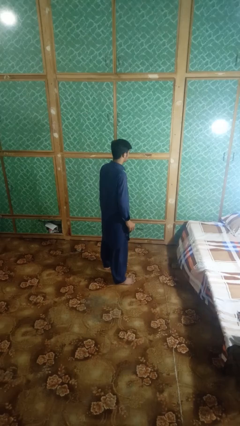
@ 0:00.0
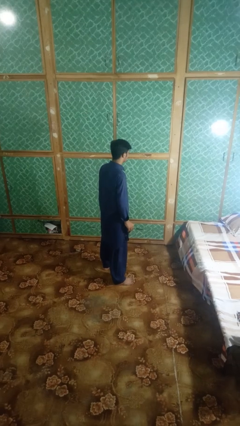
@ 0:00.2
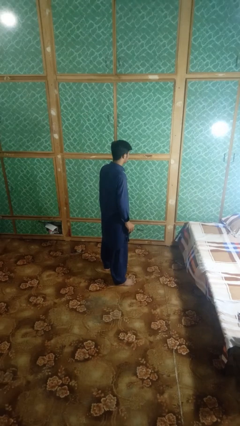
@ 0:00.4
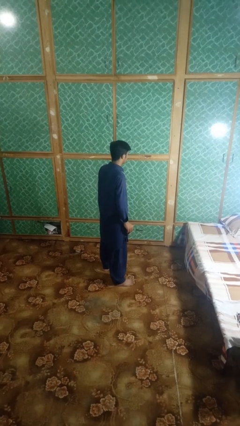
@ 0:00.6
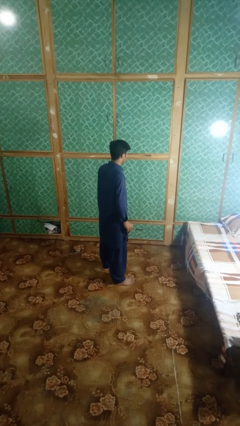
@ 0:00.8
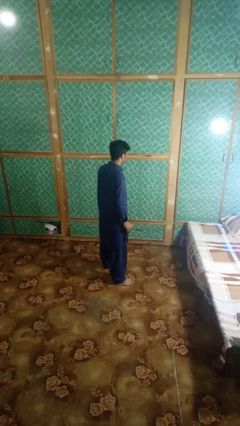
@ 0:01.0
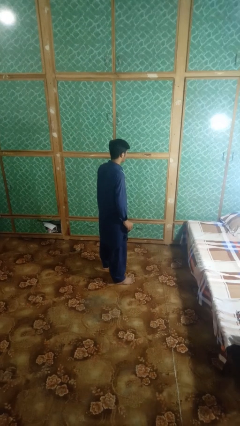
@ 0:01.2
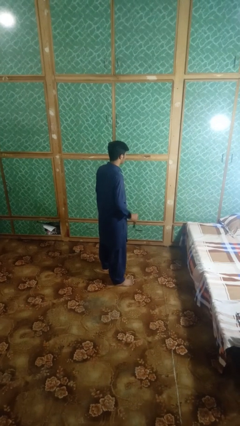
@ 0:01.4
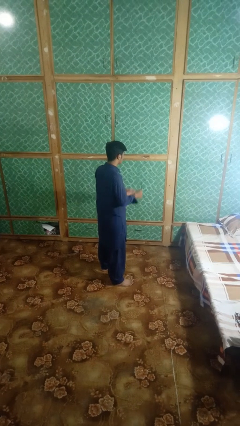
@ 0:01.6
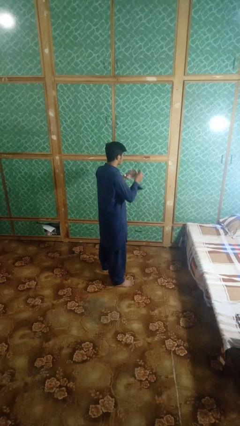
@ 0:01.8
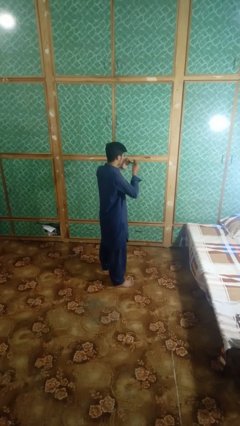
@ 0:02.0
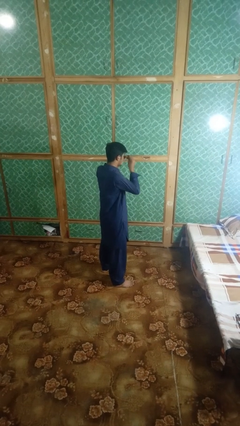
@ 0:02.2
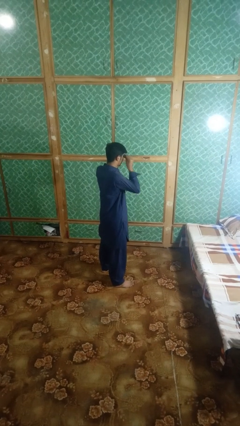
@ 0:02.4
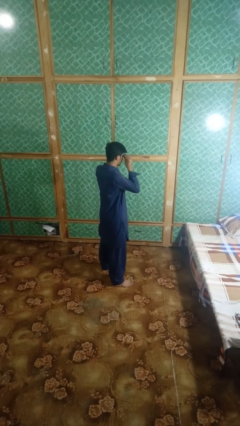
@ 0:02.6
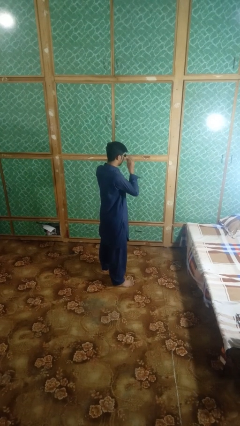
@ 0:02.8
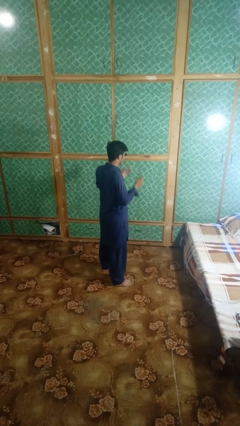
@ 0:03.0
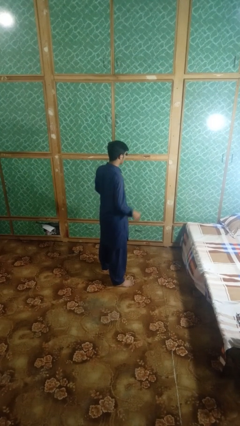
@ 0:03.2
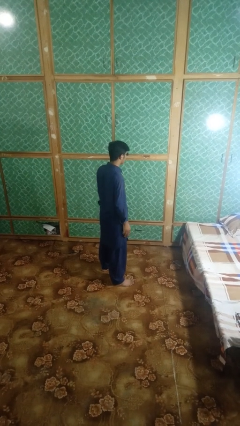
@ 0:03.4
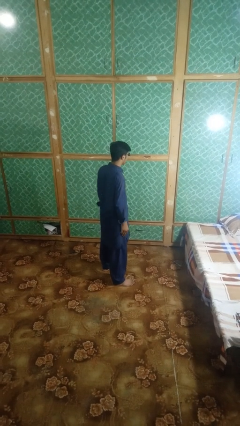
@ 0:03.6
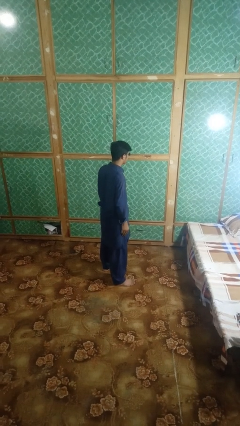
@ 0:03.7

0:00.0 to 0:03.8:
person puts on sunglasses

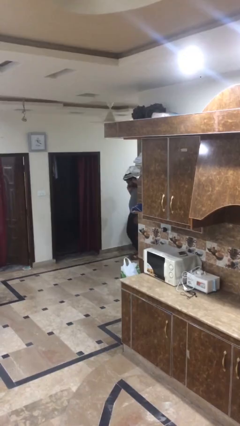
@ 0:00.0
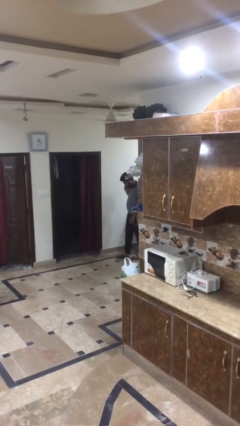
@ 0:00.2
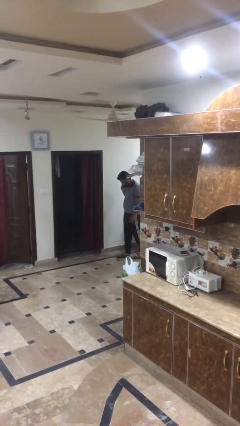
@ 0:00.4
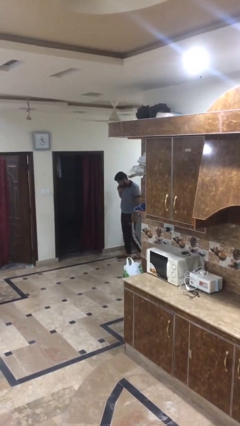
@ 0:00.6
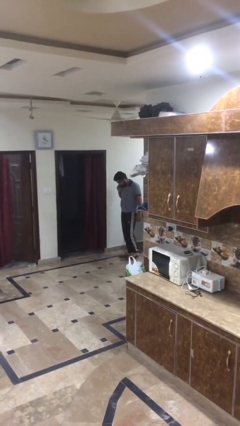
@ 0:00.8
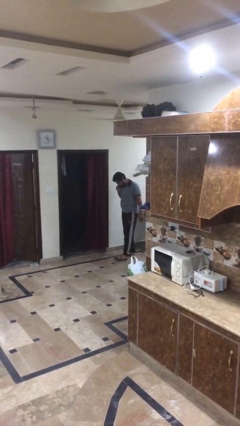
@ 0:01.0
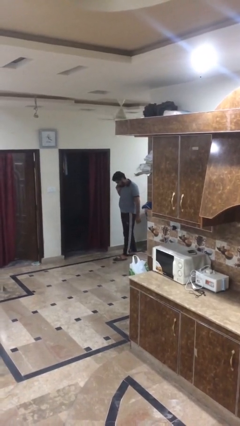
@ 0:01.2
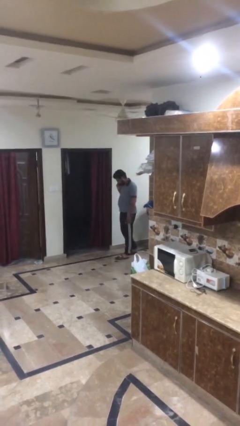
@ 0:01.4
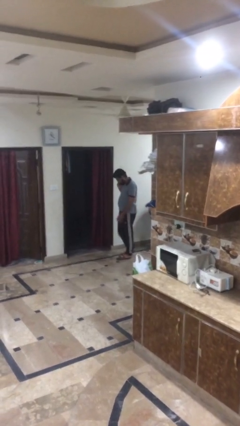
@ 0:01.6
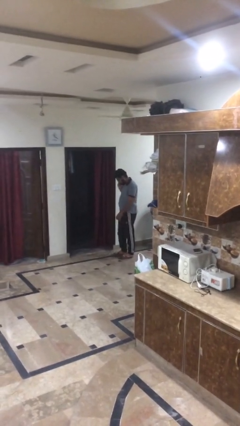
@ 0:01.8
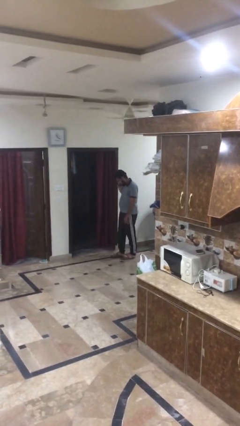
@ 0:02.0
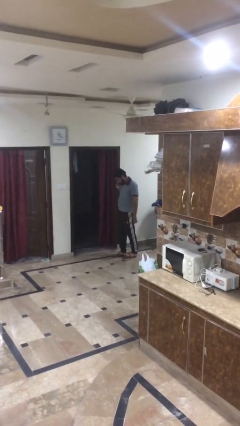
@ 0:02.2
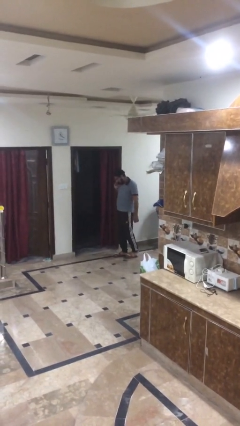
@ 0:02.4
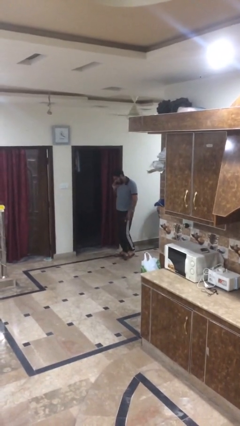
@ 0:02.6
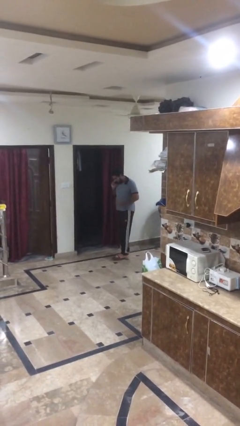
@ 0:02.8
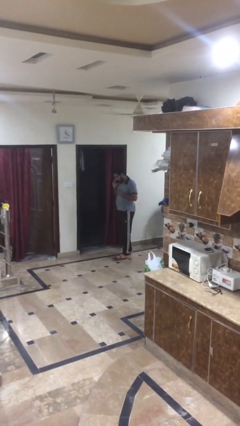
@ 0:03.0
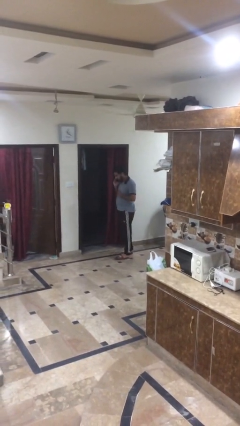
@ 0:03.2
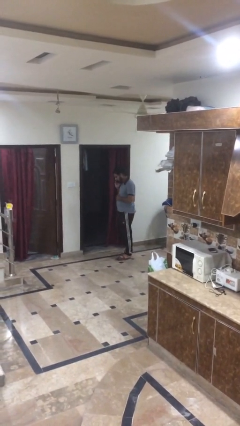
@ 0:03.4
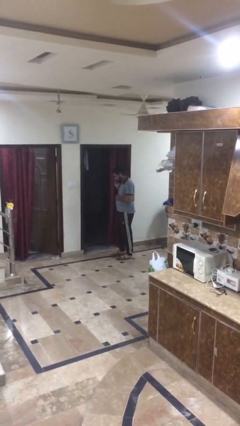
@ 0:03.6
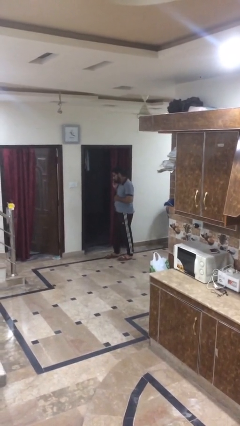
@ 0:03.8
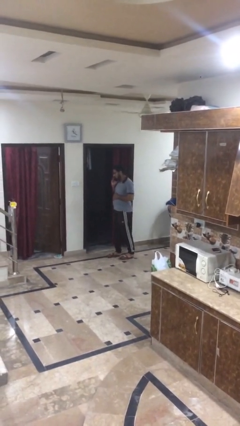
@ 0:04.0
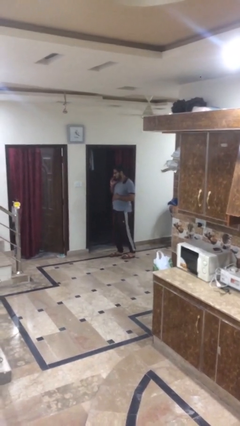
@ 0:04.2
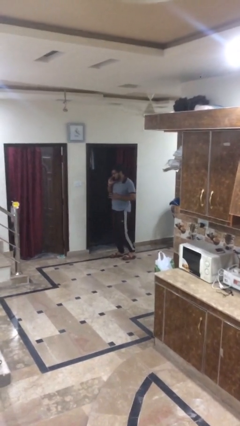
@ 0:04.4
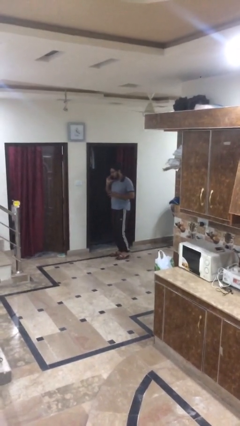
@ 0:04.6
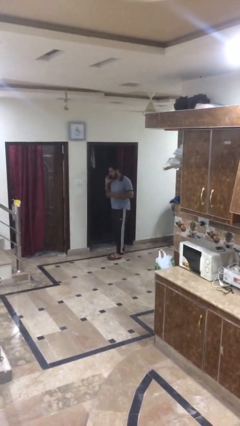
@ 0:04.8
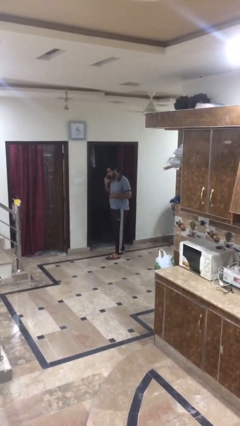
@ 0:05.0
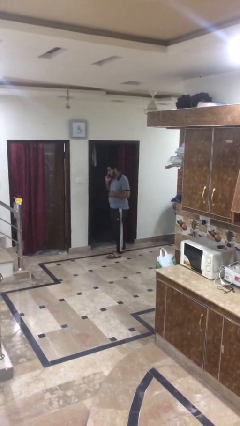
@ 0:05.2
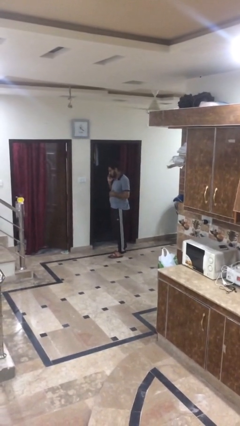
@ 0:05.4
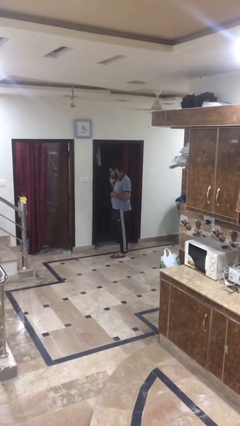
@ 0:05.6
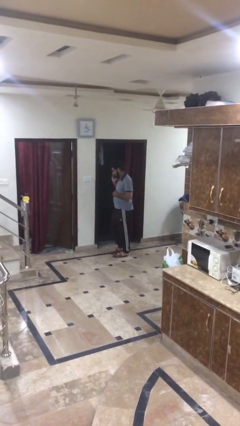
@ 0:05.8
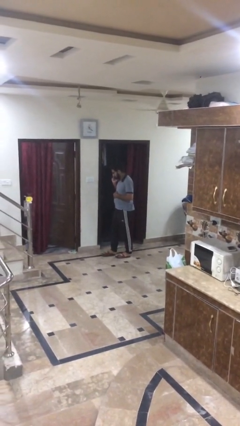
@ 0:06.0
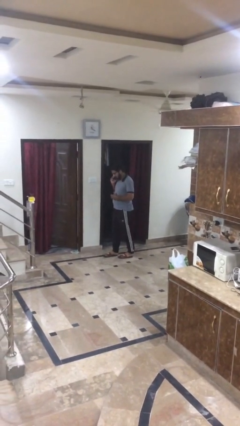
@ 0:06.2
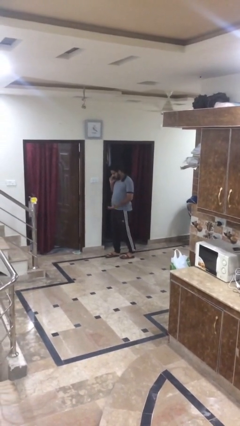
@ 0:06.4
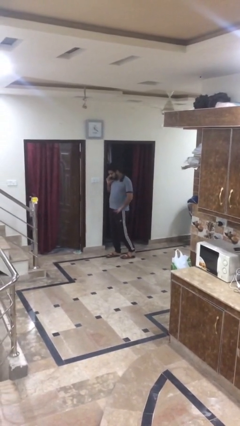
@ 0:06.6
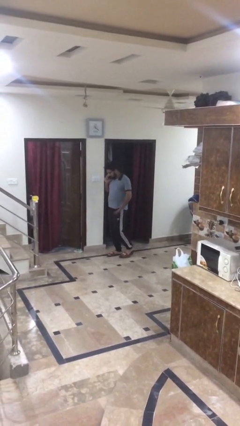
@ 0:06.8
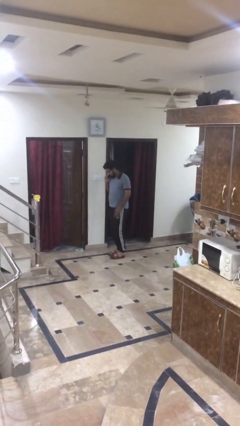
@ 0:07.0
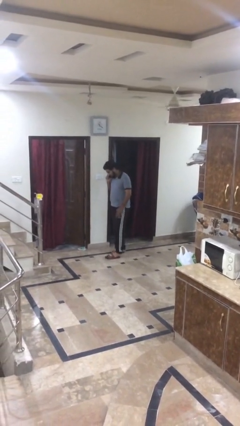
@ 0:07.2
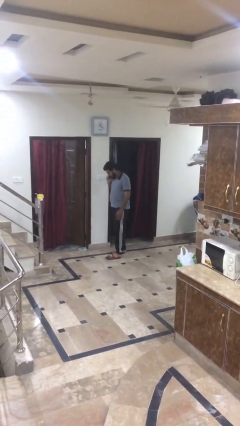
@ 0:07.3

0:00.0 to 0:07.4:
person enters scene through structure

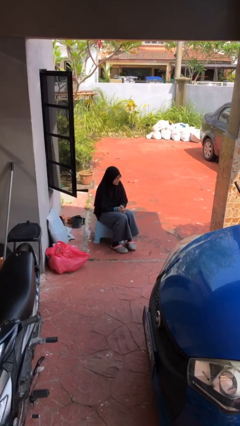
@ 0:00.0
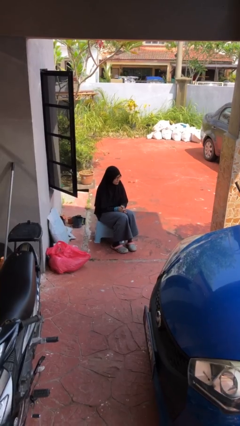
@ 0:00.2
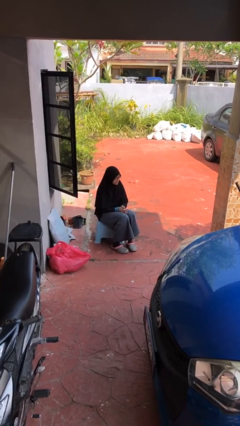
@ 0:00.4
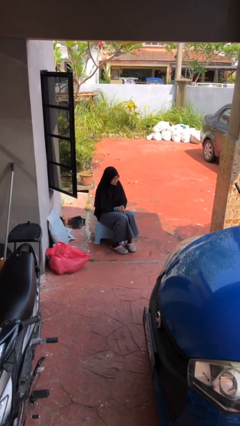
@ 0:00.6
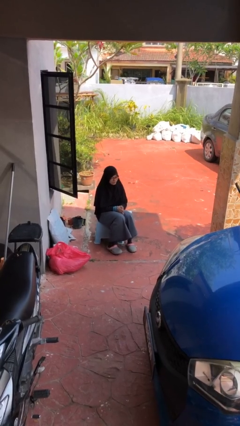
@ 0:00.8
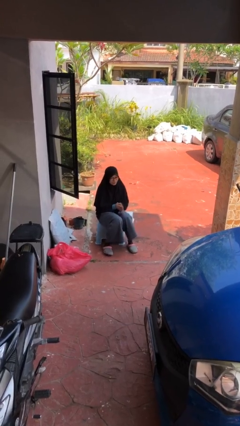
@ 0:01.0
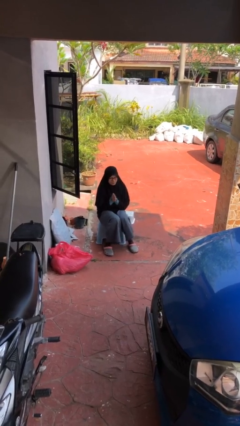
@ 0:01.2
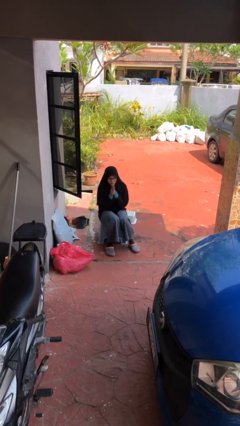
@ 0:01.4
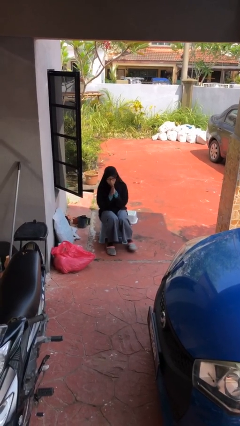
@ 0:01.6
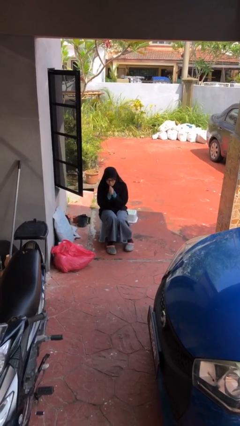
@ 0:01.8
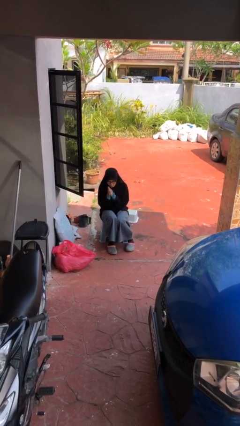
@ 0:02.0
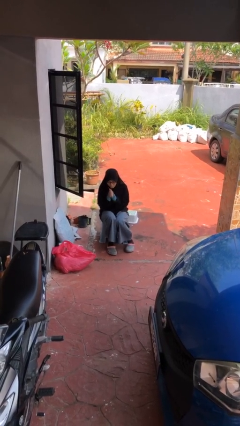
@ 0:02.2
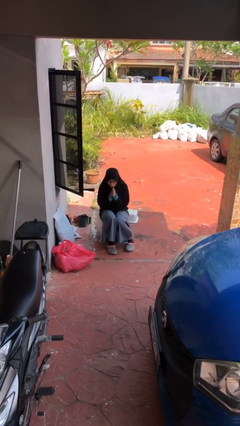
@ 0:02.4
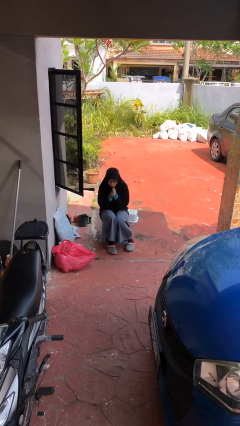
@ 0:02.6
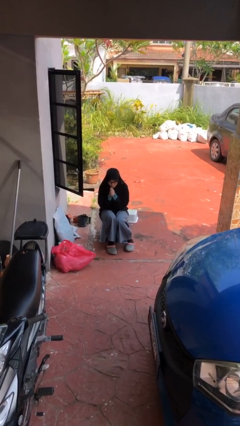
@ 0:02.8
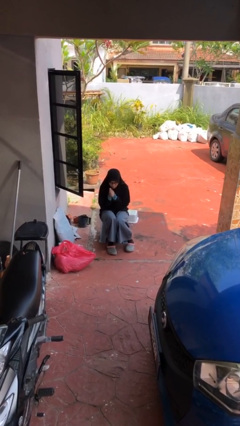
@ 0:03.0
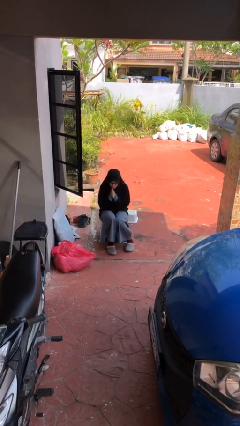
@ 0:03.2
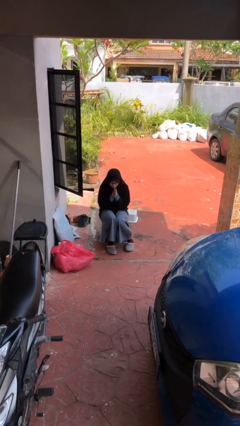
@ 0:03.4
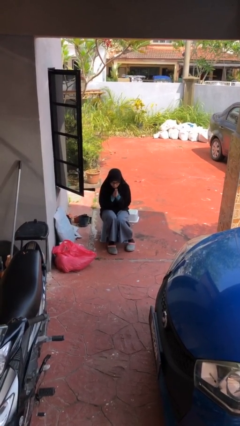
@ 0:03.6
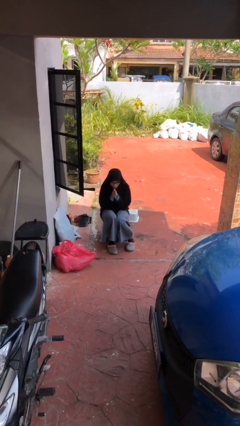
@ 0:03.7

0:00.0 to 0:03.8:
person blows into hands

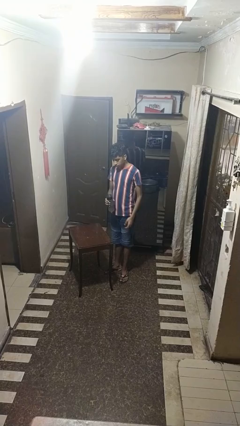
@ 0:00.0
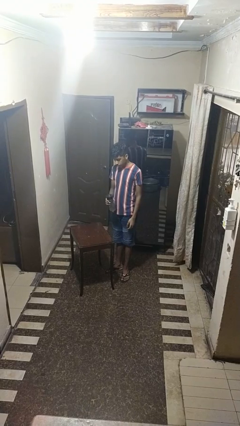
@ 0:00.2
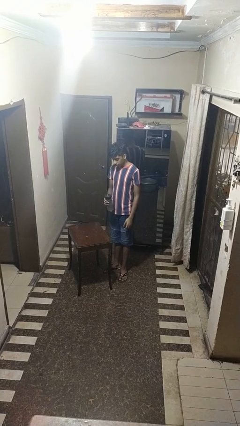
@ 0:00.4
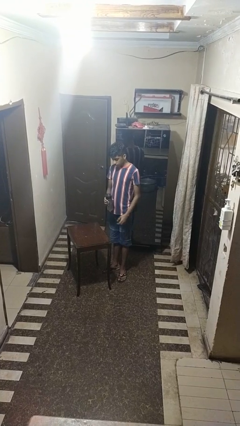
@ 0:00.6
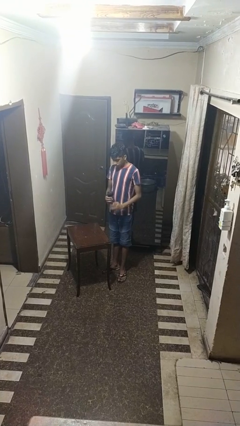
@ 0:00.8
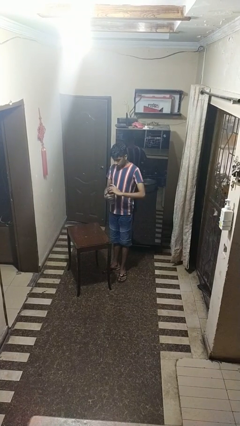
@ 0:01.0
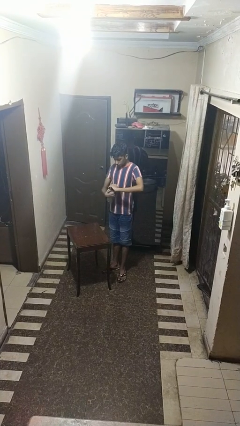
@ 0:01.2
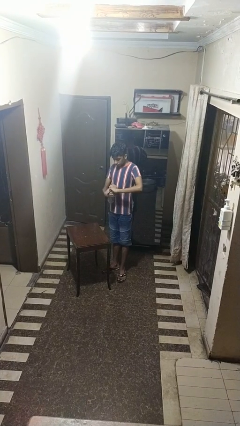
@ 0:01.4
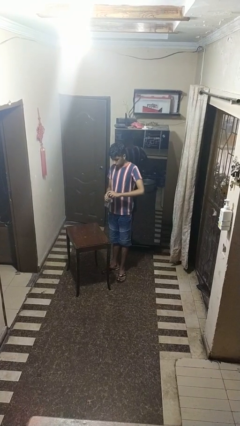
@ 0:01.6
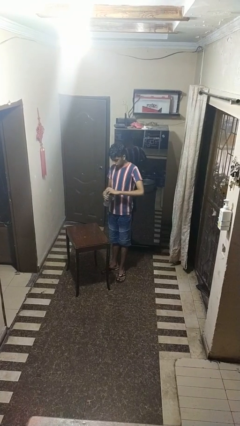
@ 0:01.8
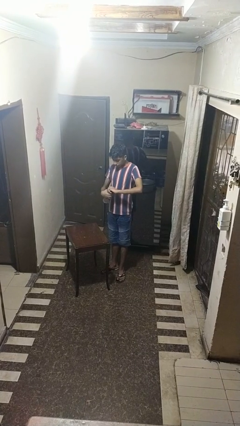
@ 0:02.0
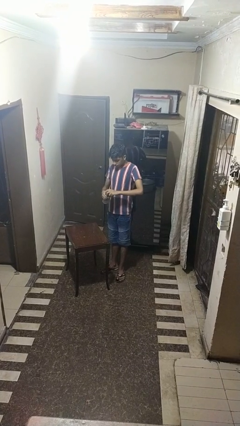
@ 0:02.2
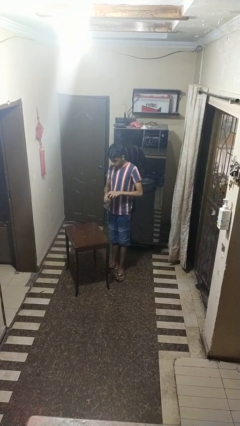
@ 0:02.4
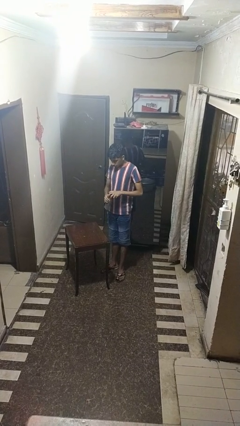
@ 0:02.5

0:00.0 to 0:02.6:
person unscrews lid from bottle

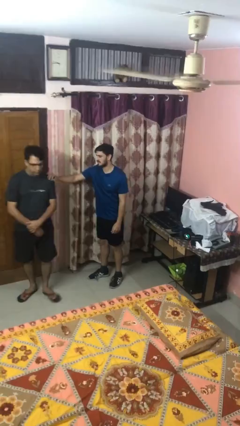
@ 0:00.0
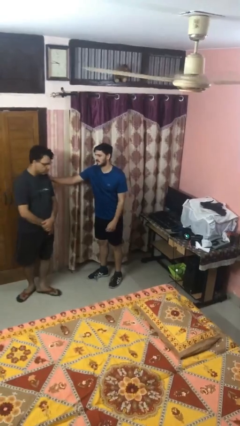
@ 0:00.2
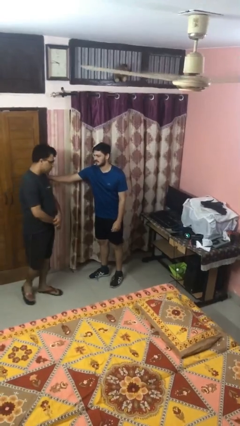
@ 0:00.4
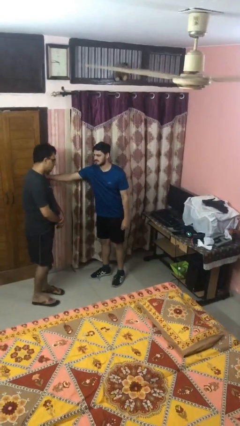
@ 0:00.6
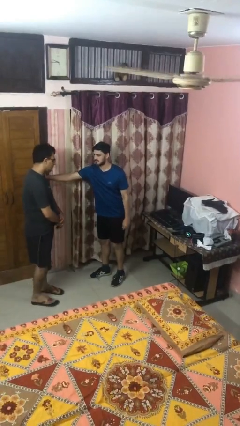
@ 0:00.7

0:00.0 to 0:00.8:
person spins person around
